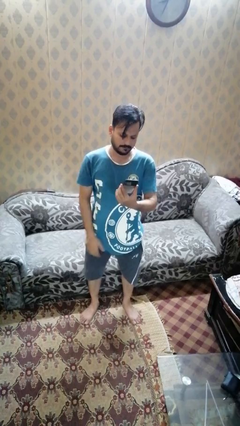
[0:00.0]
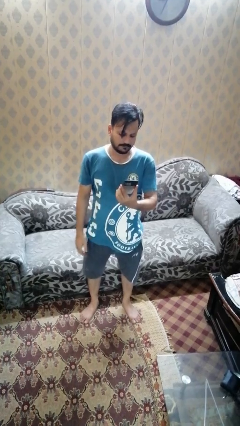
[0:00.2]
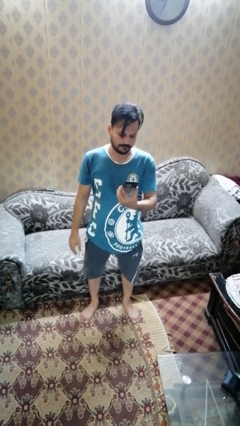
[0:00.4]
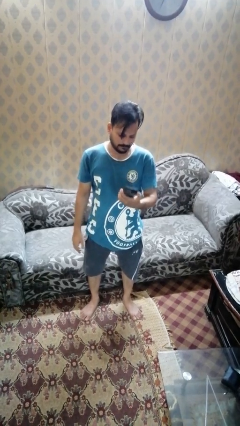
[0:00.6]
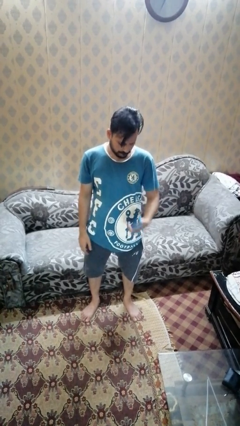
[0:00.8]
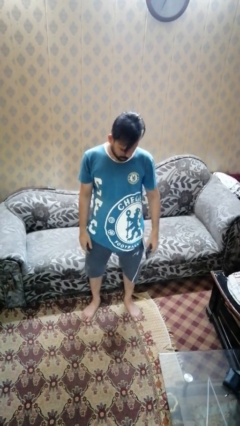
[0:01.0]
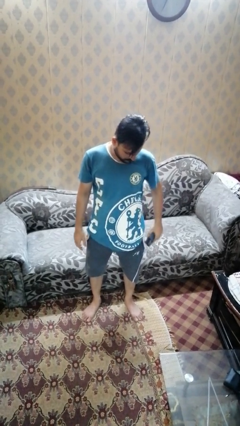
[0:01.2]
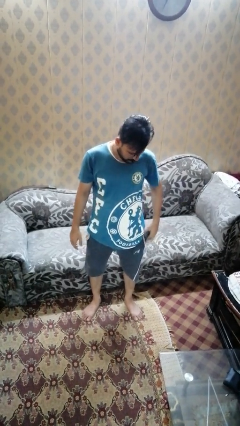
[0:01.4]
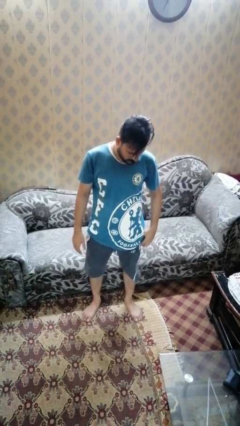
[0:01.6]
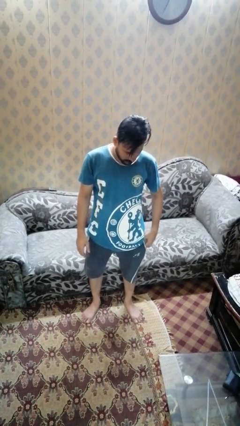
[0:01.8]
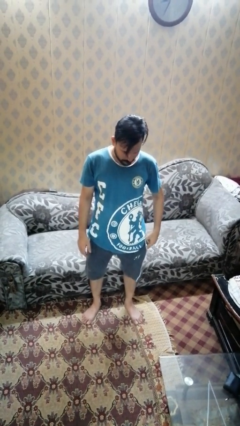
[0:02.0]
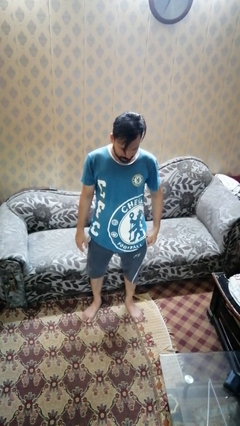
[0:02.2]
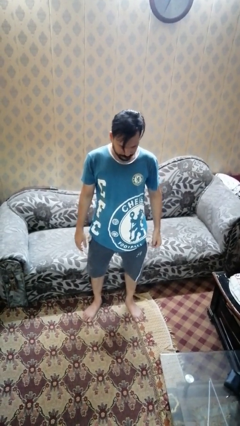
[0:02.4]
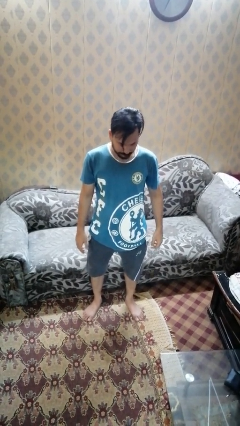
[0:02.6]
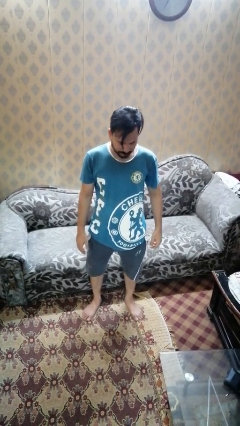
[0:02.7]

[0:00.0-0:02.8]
person puts phone into pocket

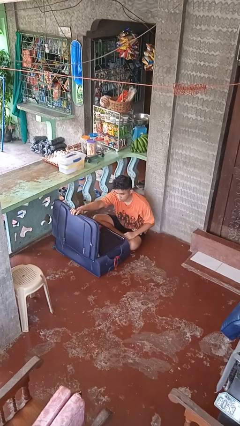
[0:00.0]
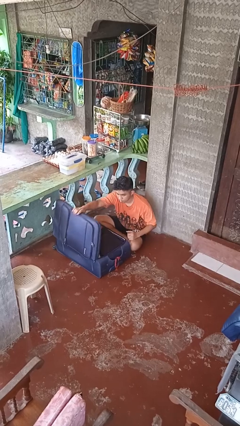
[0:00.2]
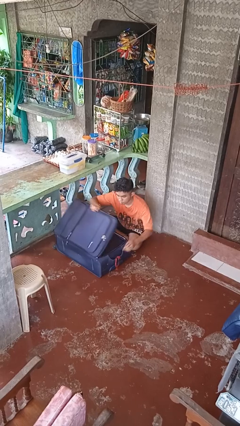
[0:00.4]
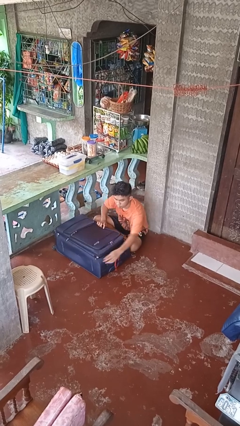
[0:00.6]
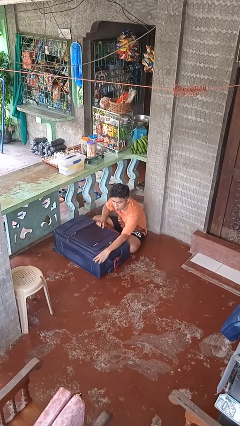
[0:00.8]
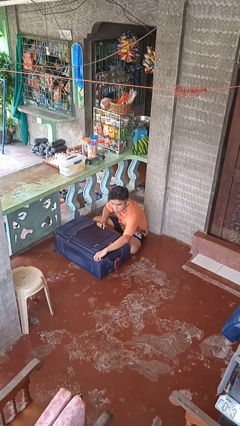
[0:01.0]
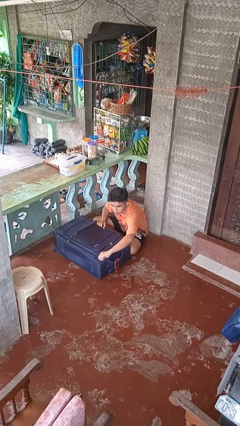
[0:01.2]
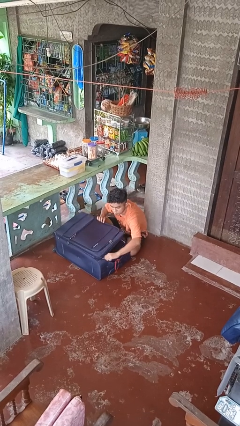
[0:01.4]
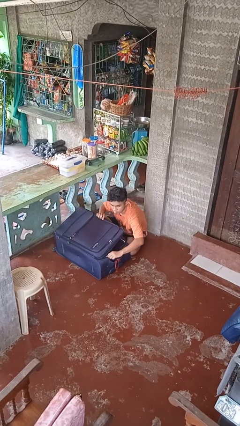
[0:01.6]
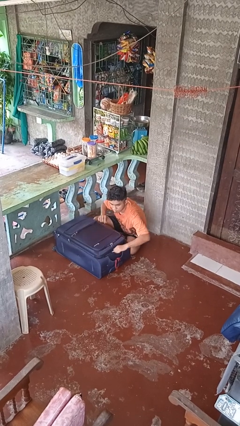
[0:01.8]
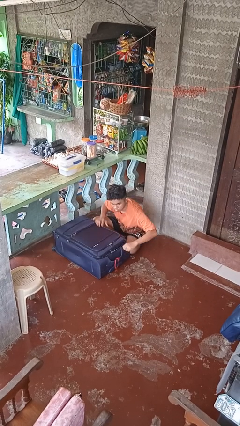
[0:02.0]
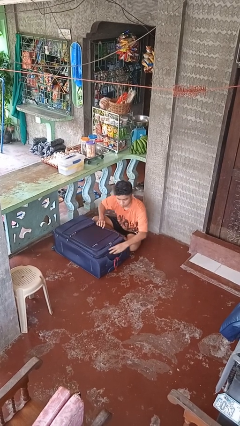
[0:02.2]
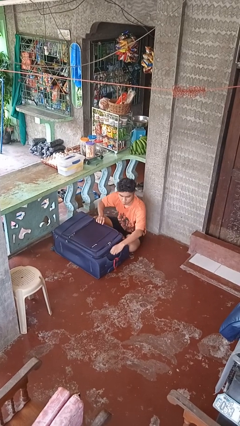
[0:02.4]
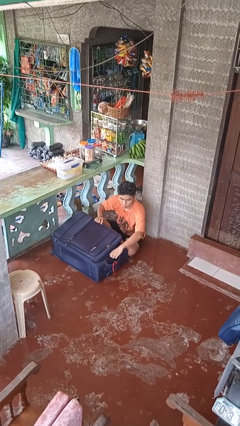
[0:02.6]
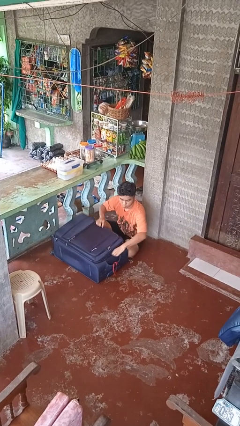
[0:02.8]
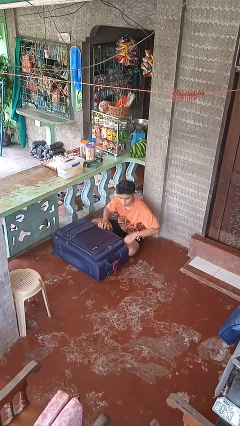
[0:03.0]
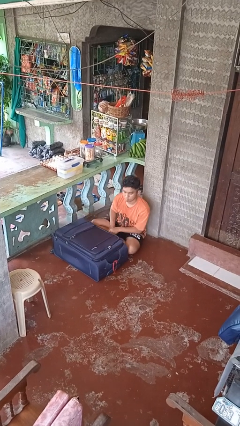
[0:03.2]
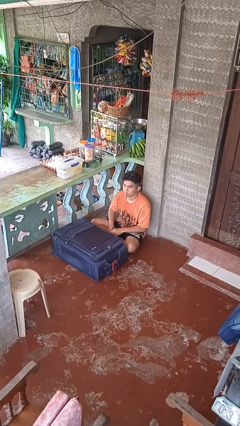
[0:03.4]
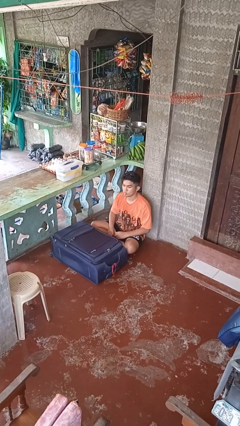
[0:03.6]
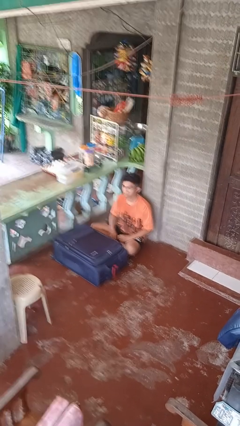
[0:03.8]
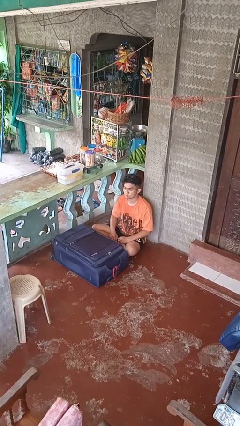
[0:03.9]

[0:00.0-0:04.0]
person closes suitcase

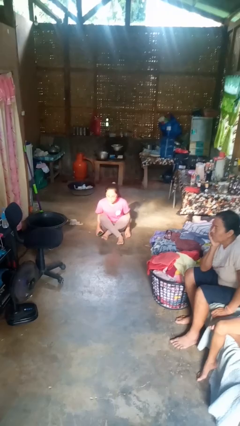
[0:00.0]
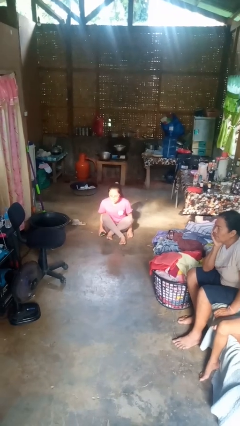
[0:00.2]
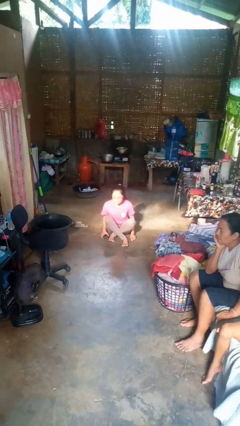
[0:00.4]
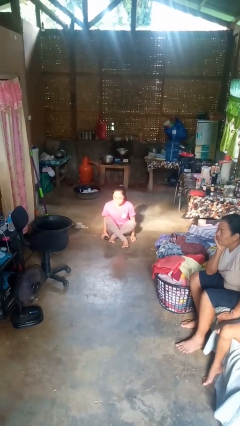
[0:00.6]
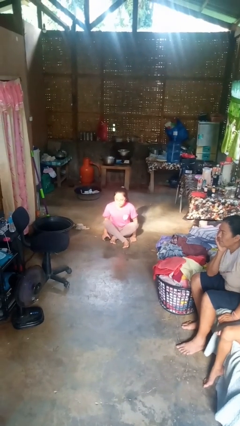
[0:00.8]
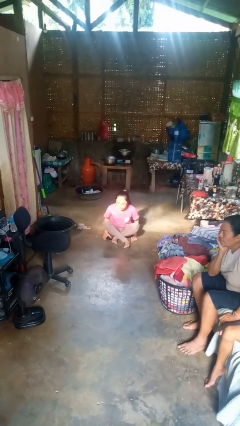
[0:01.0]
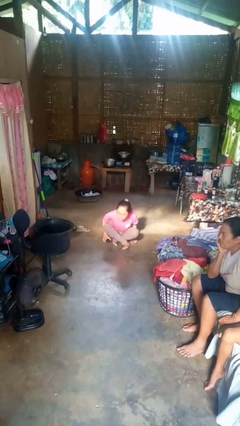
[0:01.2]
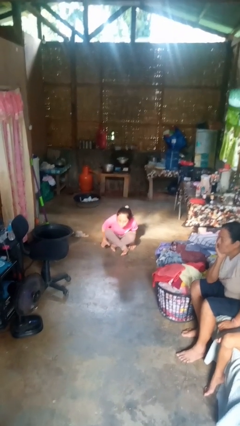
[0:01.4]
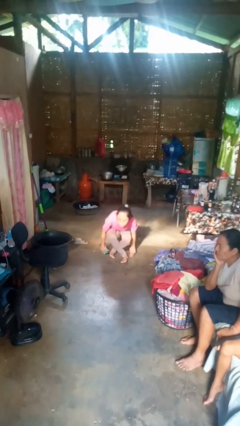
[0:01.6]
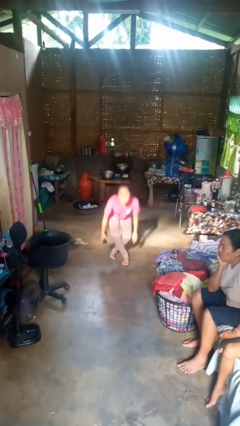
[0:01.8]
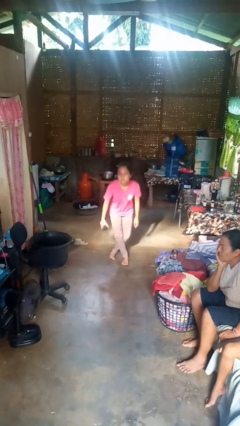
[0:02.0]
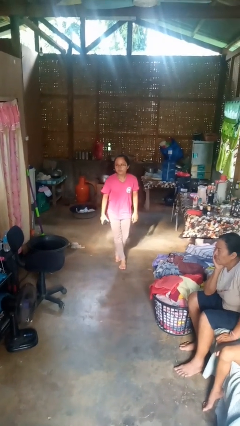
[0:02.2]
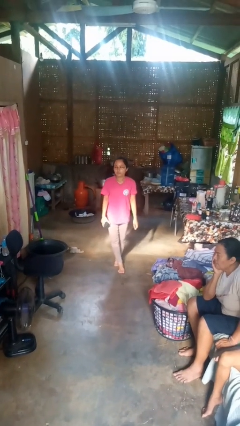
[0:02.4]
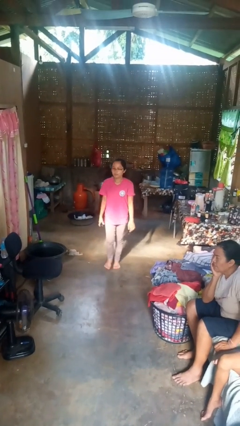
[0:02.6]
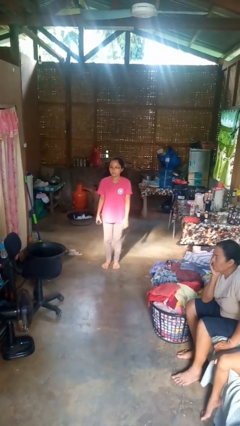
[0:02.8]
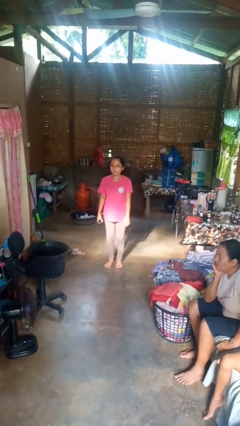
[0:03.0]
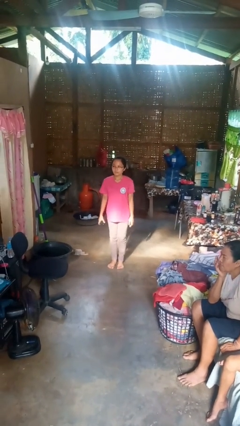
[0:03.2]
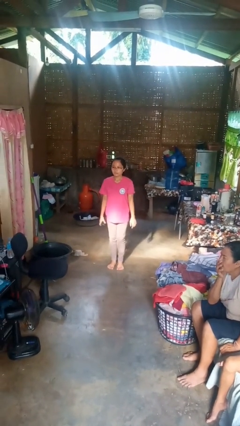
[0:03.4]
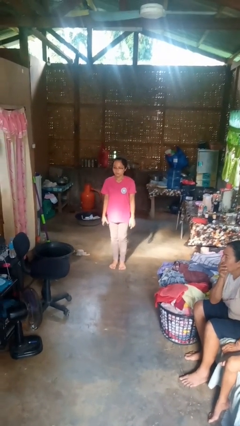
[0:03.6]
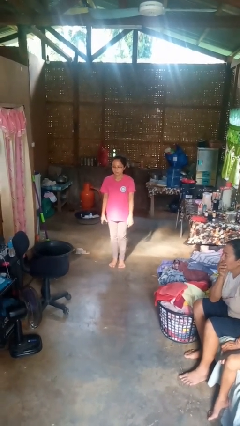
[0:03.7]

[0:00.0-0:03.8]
person stands up from floor

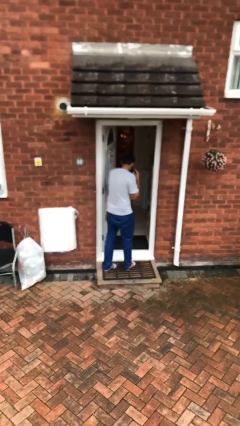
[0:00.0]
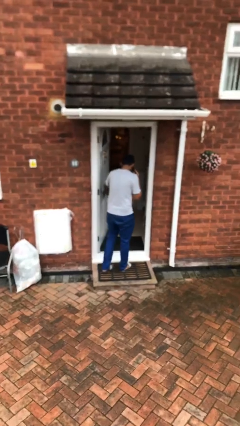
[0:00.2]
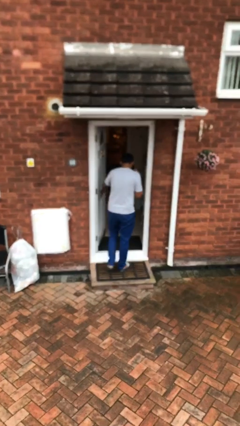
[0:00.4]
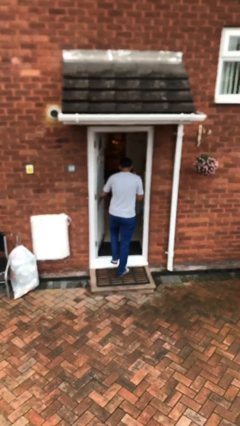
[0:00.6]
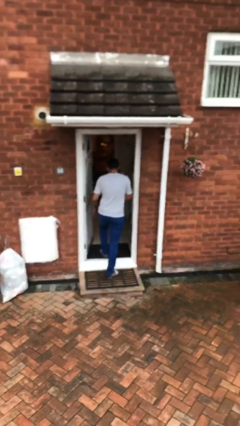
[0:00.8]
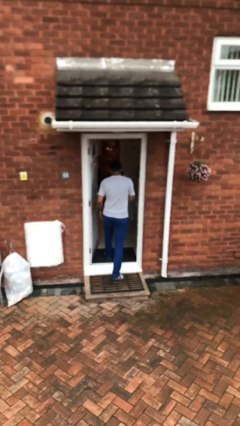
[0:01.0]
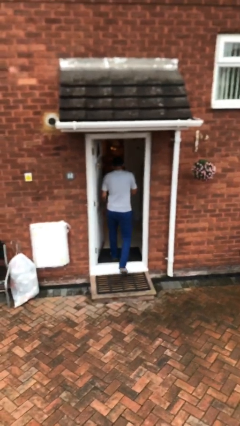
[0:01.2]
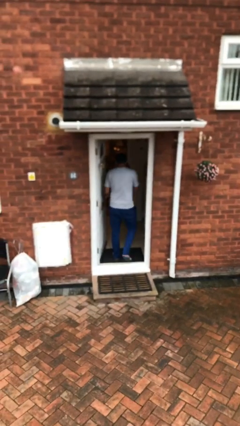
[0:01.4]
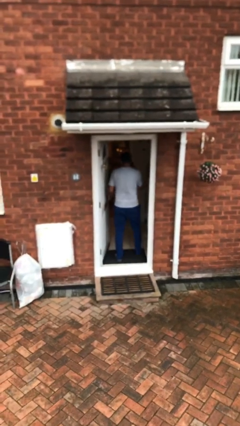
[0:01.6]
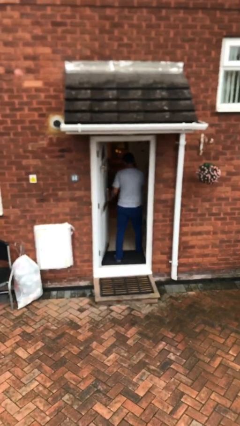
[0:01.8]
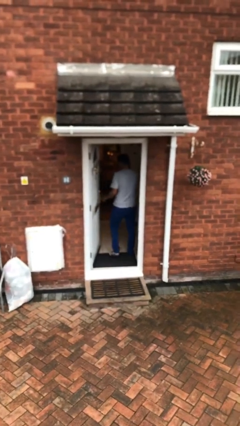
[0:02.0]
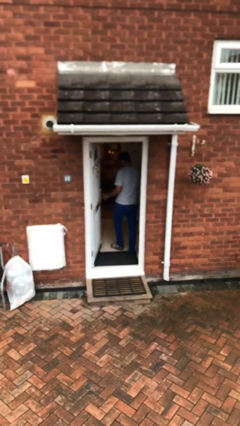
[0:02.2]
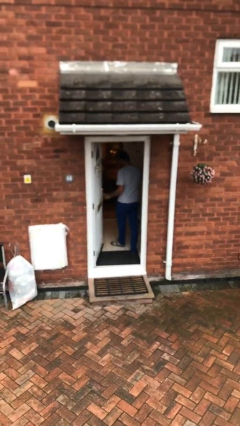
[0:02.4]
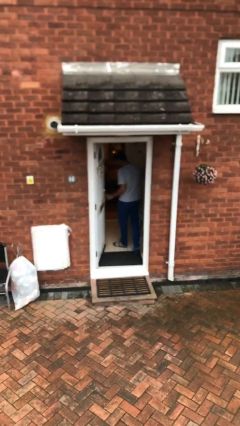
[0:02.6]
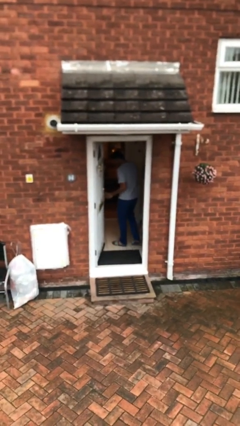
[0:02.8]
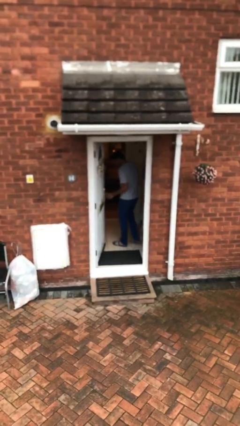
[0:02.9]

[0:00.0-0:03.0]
person exits scene through structure

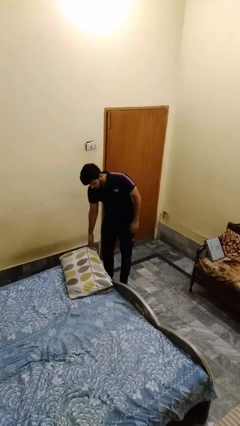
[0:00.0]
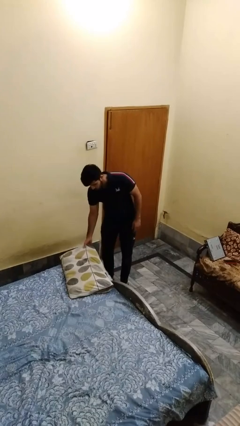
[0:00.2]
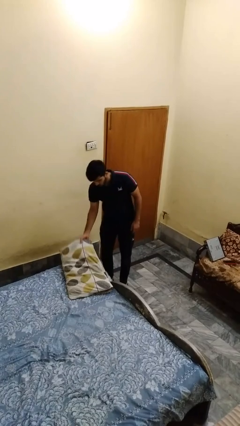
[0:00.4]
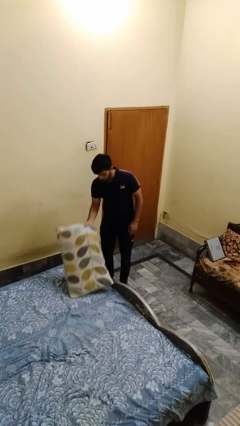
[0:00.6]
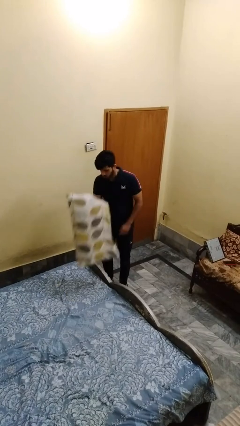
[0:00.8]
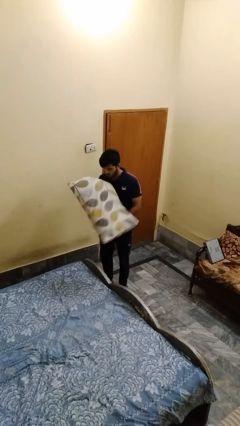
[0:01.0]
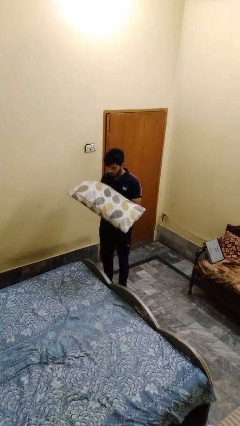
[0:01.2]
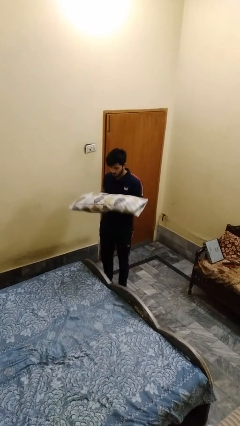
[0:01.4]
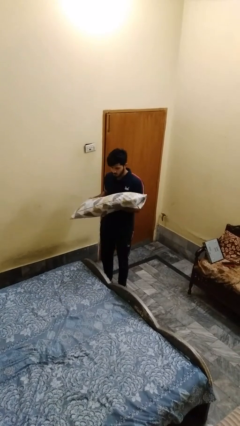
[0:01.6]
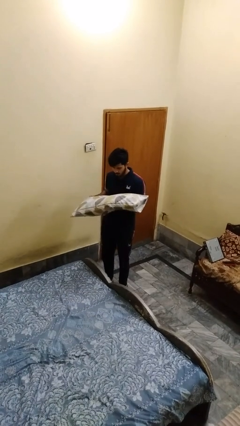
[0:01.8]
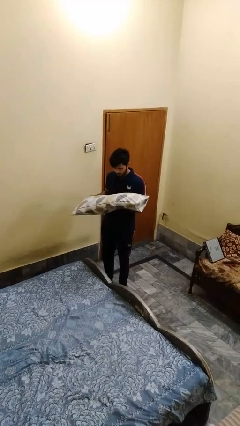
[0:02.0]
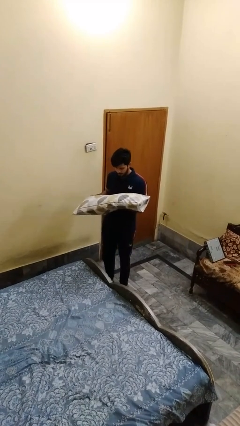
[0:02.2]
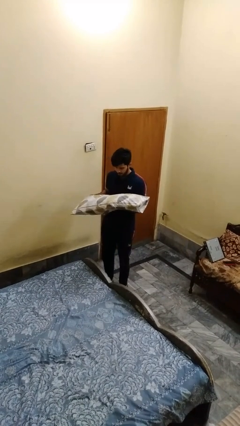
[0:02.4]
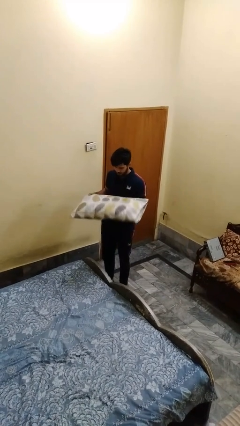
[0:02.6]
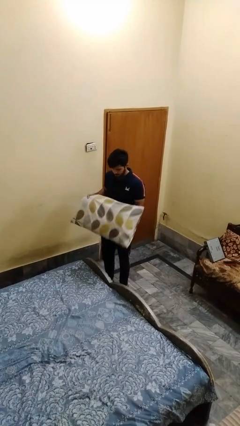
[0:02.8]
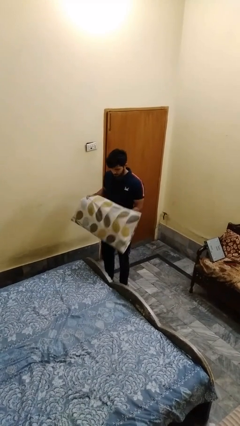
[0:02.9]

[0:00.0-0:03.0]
person picks up object from bed

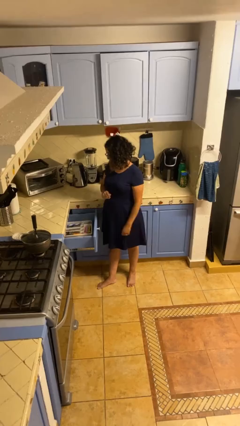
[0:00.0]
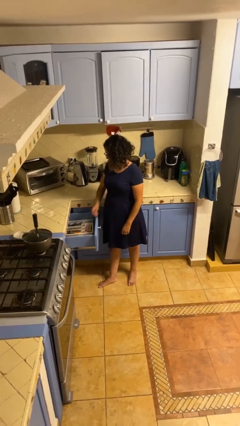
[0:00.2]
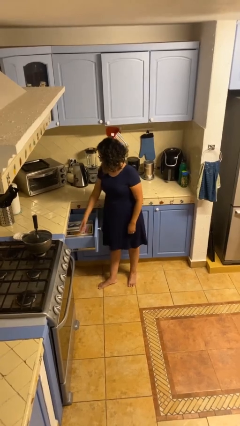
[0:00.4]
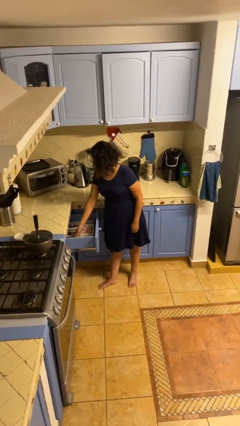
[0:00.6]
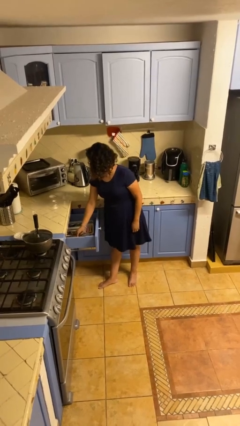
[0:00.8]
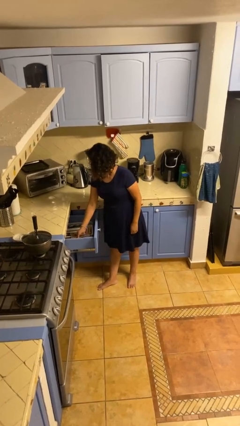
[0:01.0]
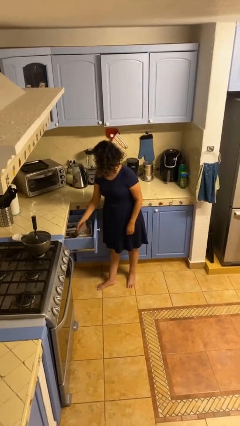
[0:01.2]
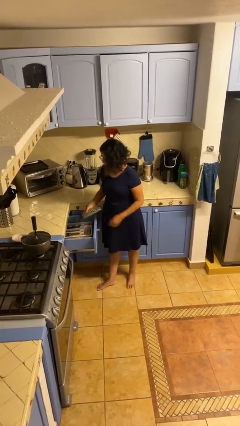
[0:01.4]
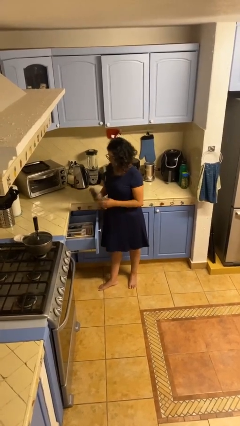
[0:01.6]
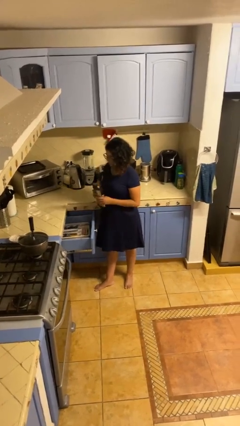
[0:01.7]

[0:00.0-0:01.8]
person takes object from kitchen drawer
